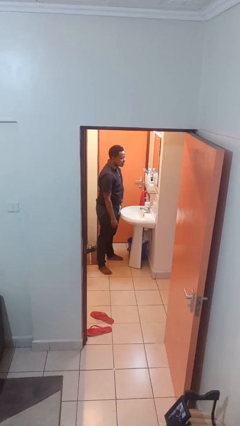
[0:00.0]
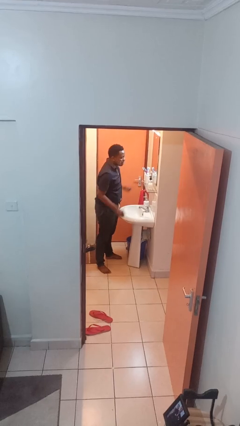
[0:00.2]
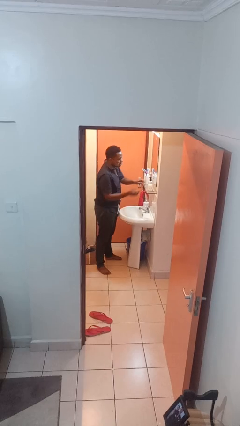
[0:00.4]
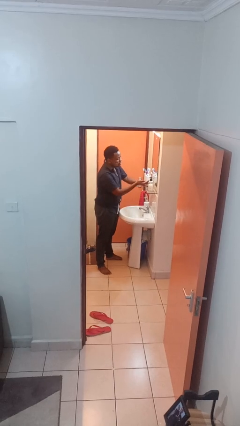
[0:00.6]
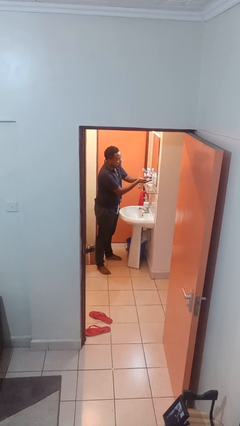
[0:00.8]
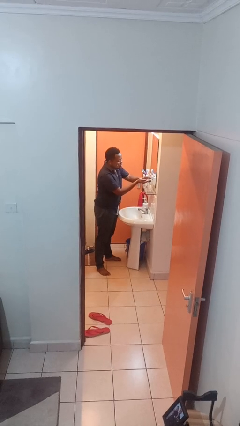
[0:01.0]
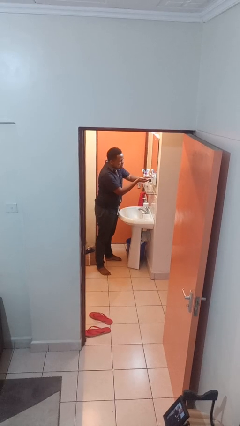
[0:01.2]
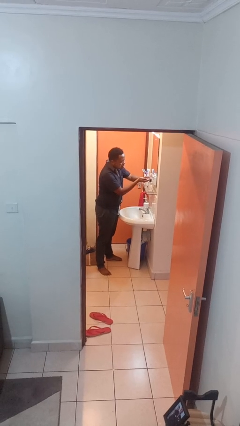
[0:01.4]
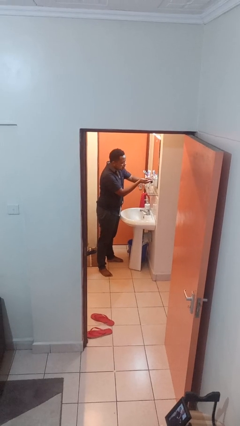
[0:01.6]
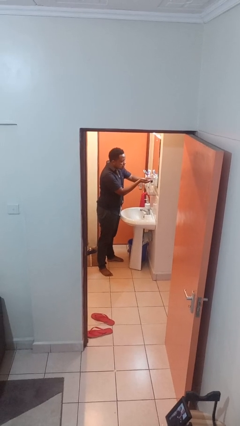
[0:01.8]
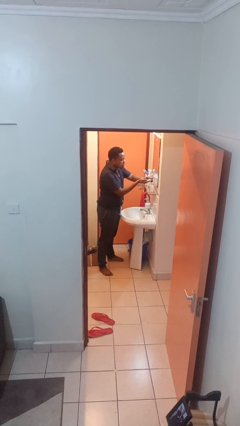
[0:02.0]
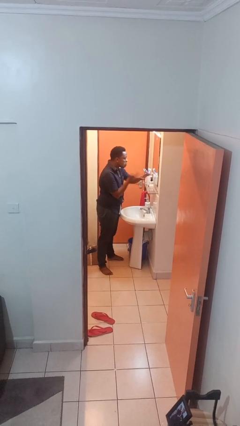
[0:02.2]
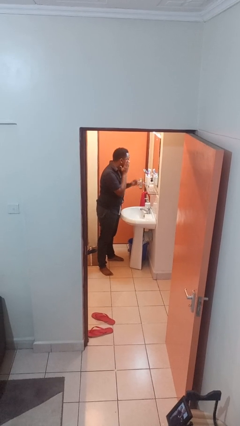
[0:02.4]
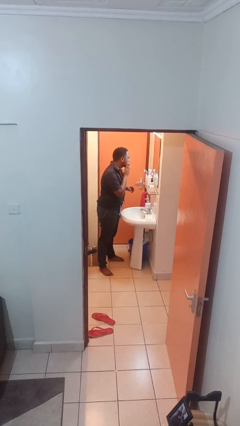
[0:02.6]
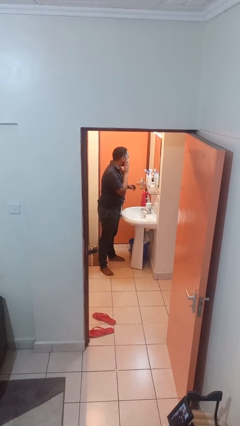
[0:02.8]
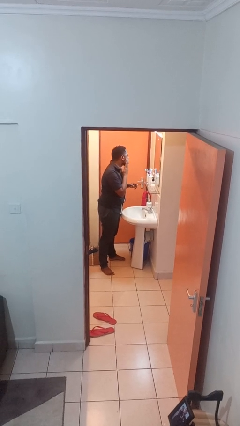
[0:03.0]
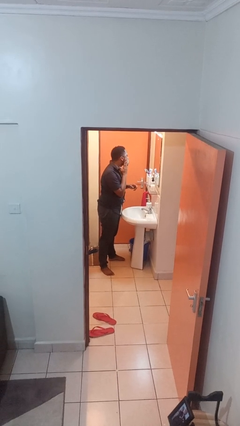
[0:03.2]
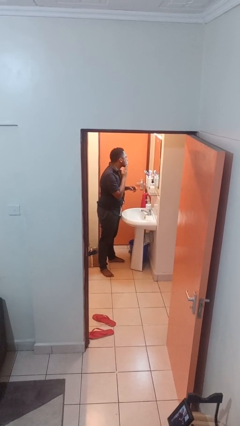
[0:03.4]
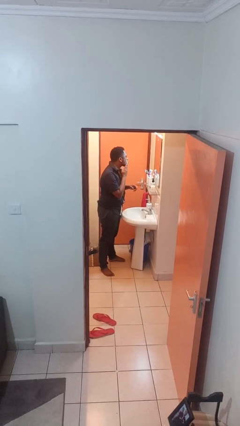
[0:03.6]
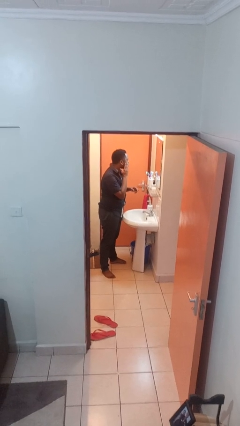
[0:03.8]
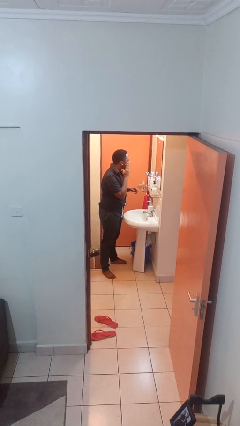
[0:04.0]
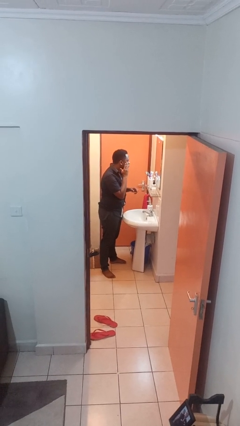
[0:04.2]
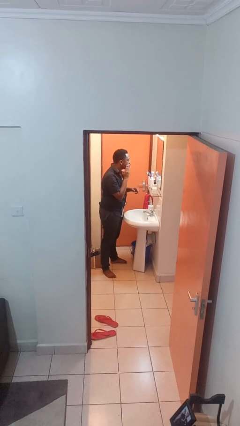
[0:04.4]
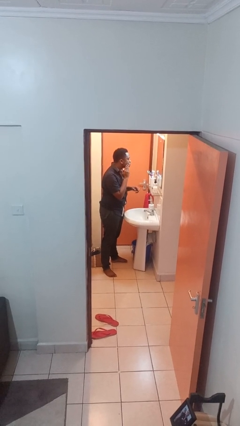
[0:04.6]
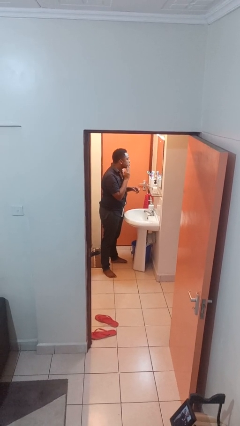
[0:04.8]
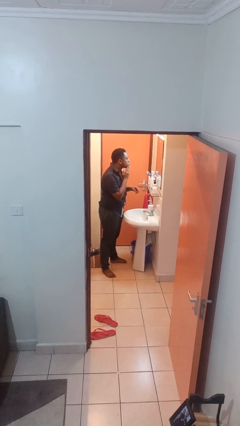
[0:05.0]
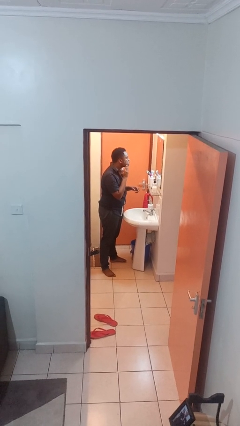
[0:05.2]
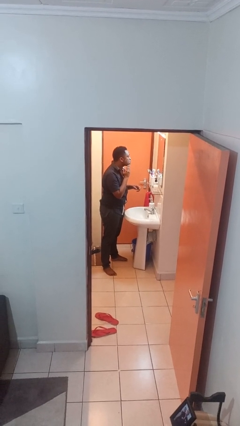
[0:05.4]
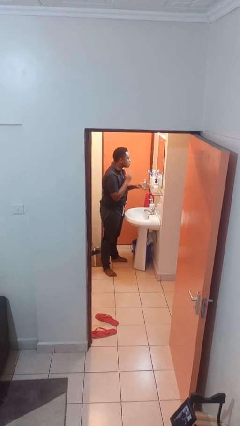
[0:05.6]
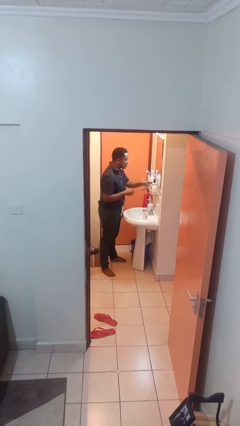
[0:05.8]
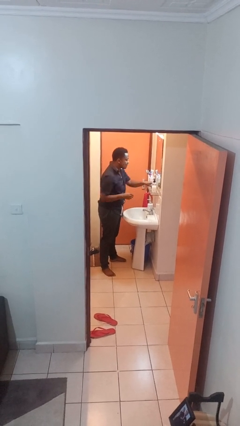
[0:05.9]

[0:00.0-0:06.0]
person applies shaving cream

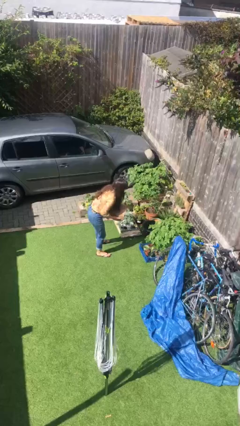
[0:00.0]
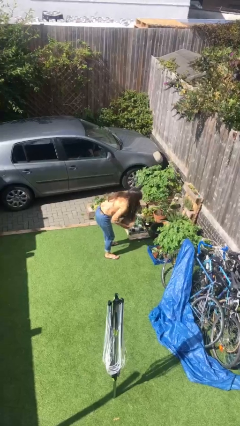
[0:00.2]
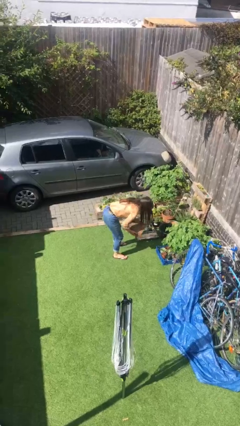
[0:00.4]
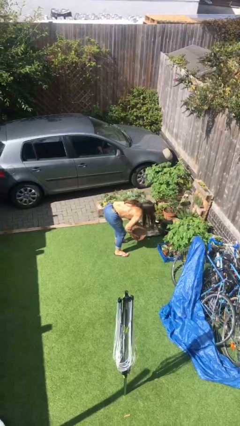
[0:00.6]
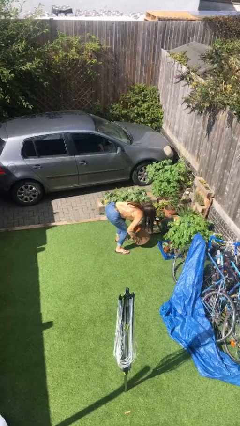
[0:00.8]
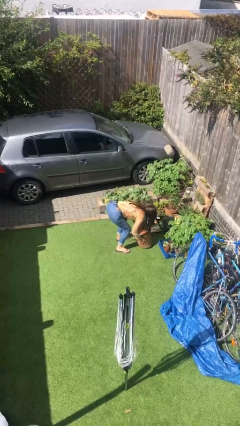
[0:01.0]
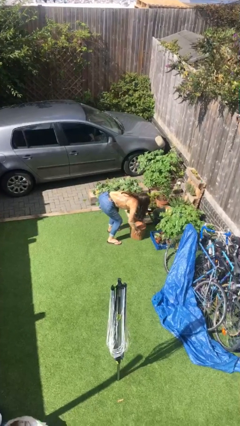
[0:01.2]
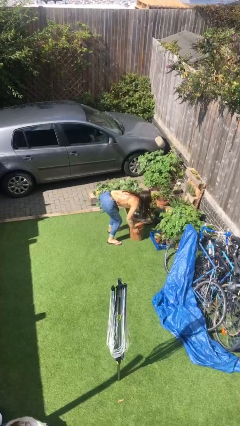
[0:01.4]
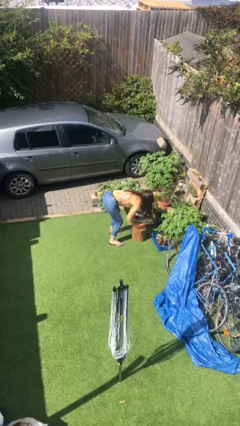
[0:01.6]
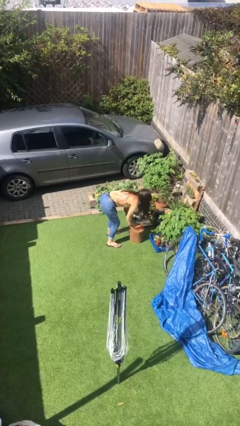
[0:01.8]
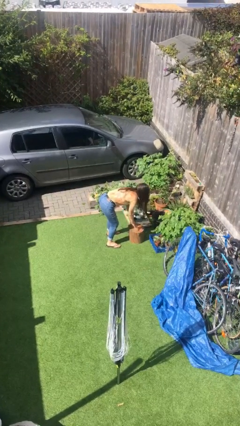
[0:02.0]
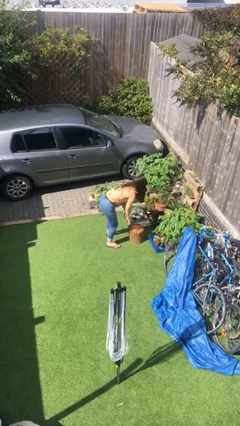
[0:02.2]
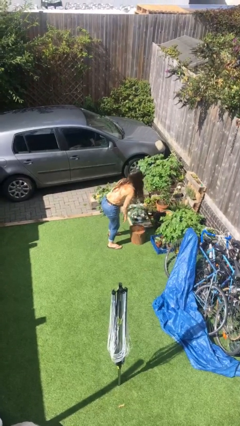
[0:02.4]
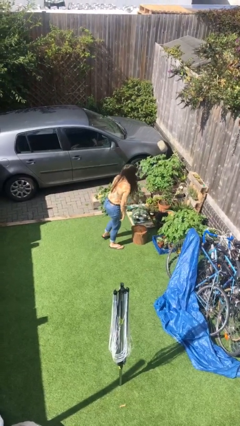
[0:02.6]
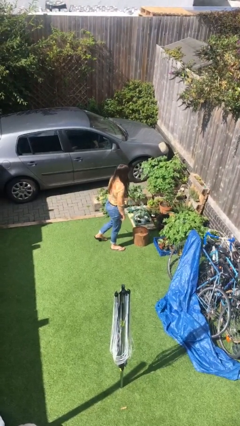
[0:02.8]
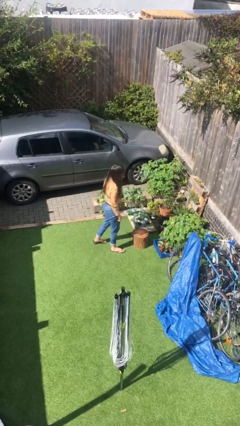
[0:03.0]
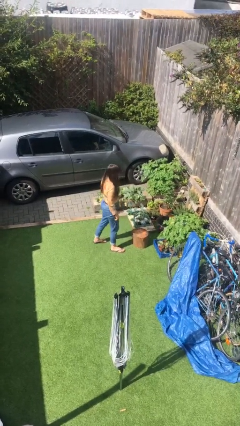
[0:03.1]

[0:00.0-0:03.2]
person puts down object on floor

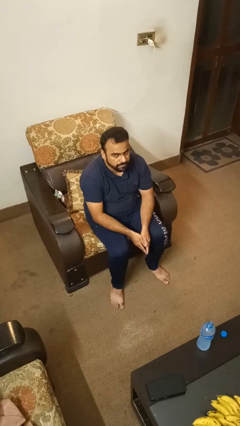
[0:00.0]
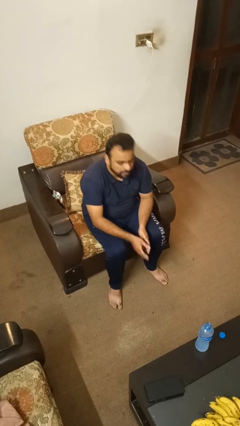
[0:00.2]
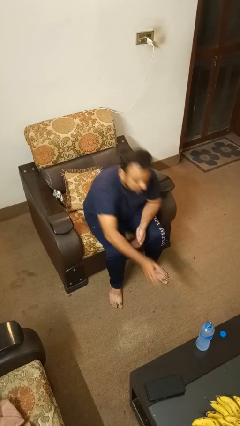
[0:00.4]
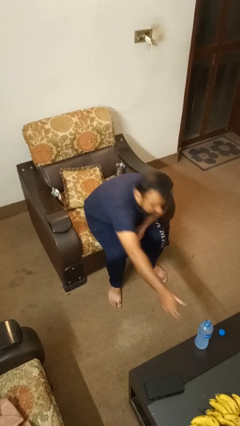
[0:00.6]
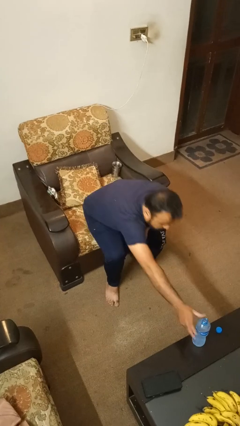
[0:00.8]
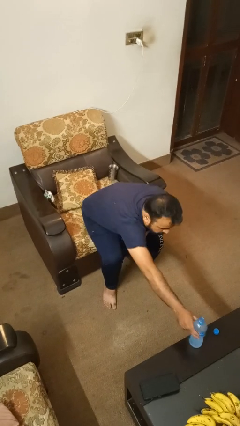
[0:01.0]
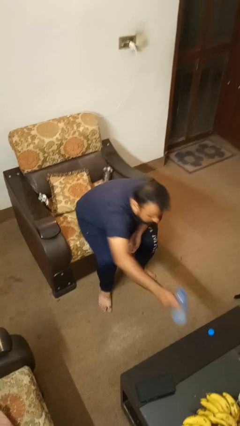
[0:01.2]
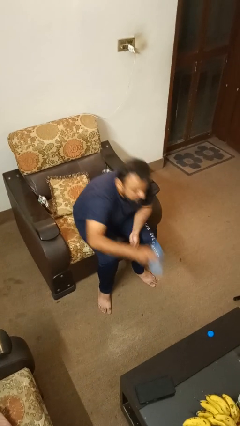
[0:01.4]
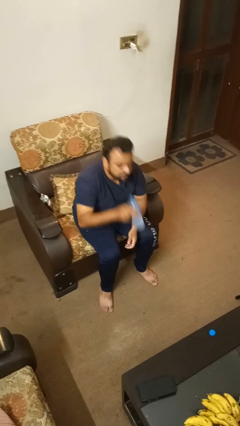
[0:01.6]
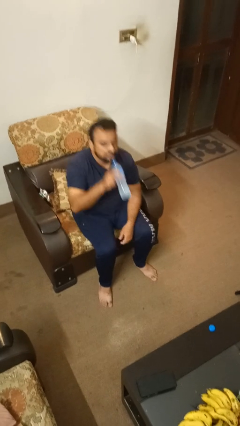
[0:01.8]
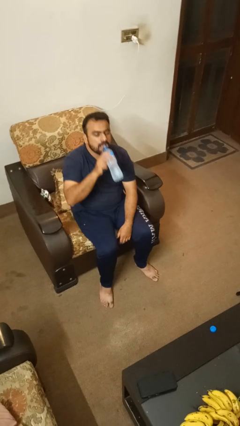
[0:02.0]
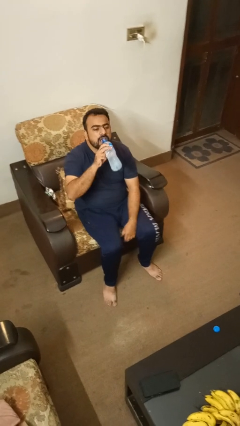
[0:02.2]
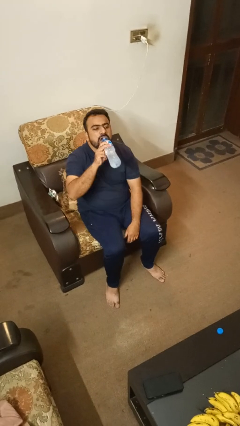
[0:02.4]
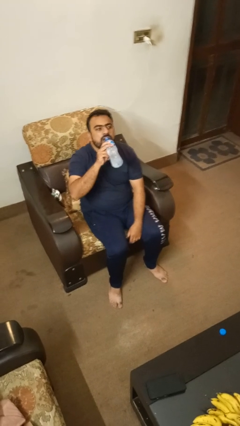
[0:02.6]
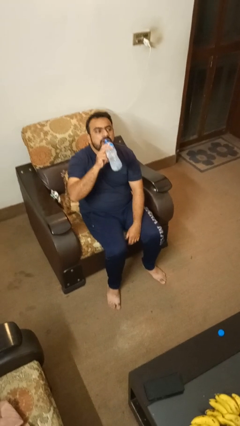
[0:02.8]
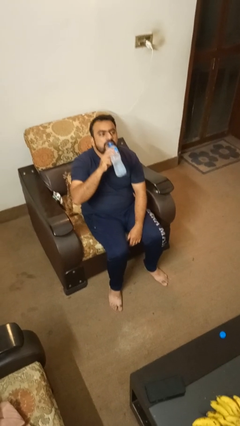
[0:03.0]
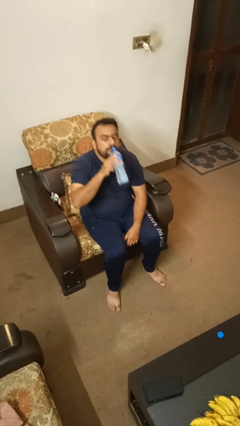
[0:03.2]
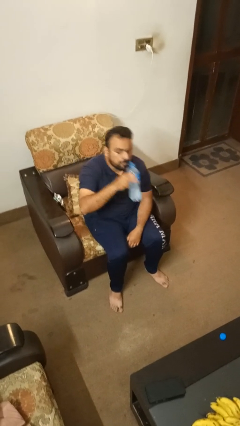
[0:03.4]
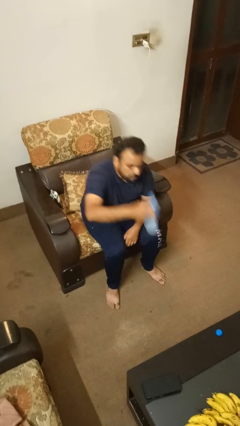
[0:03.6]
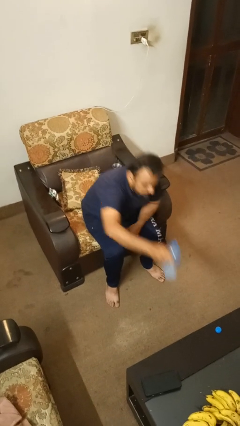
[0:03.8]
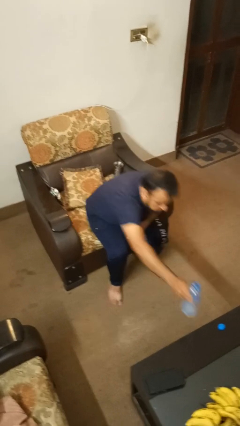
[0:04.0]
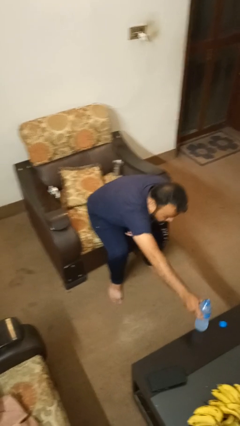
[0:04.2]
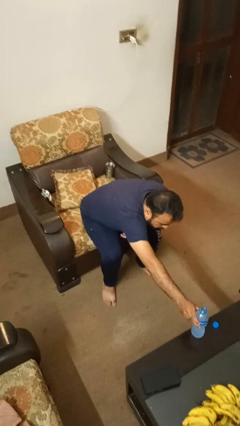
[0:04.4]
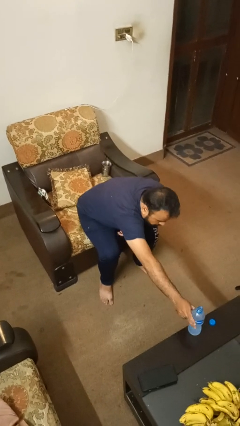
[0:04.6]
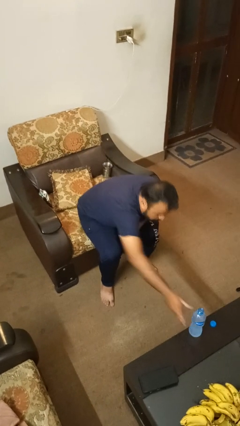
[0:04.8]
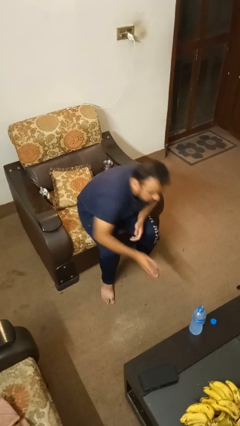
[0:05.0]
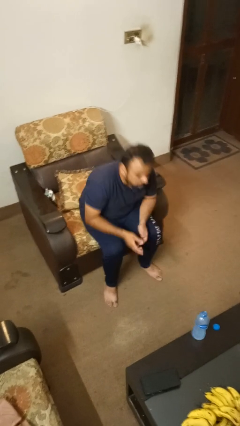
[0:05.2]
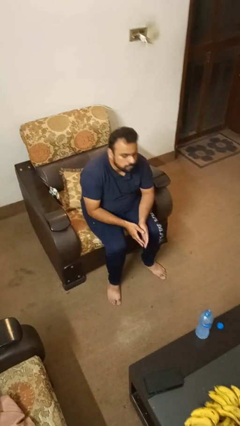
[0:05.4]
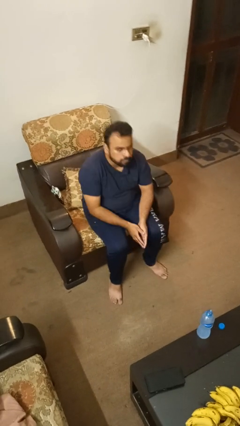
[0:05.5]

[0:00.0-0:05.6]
person drinks from bottle

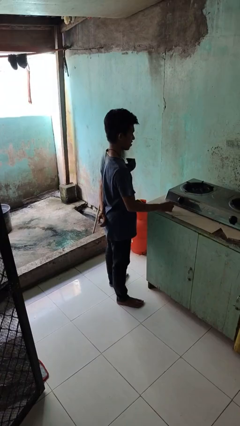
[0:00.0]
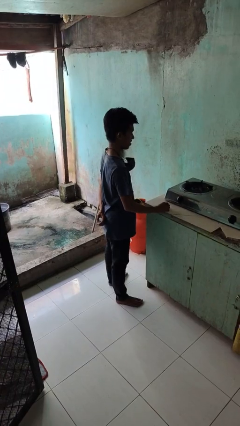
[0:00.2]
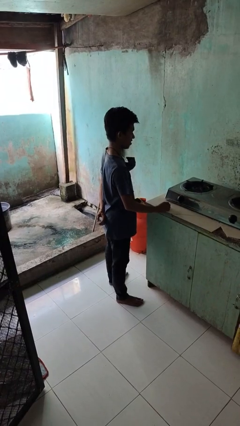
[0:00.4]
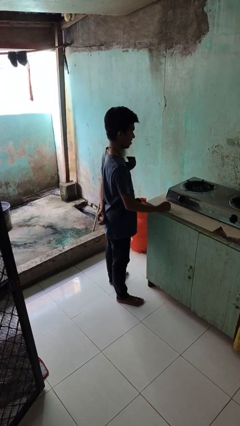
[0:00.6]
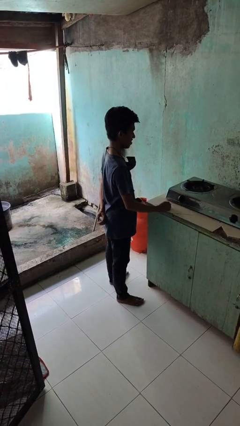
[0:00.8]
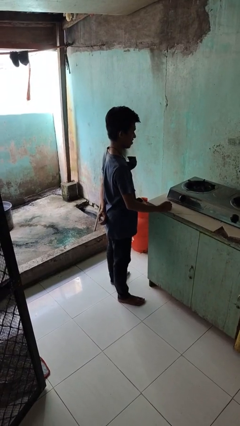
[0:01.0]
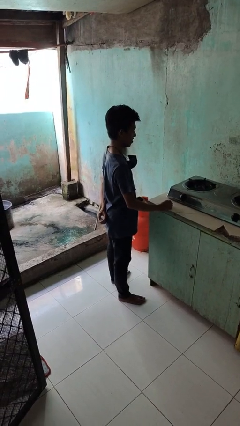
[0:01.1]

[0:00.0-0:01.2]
person turns off stovetop

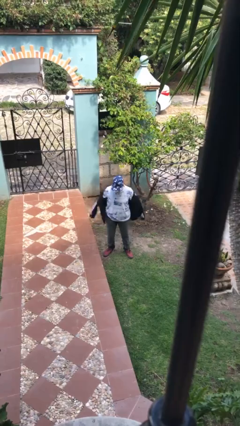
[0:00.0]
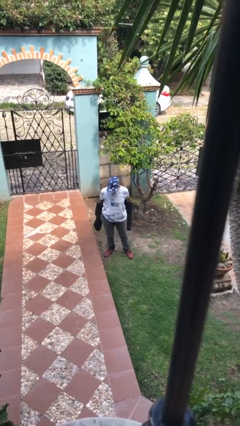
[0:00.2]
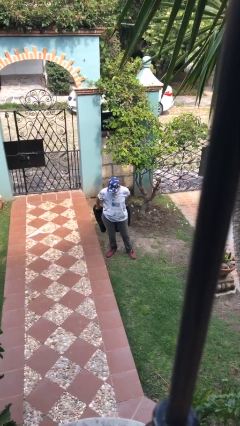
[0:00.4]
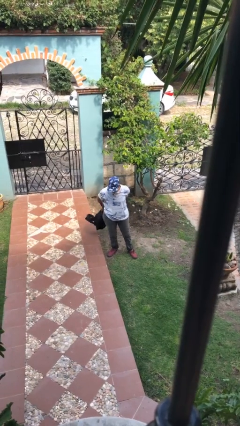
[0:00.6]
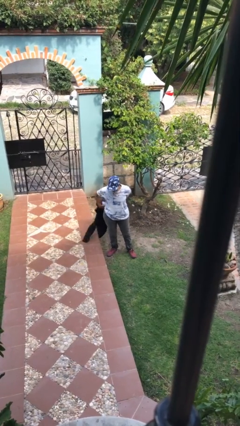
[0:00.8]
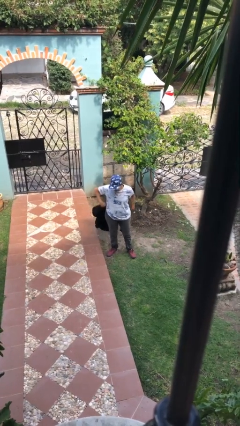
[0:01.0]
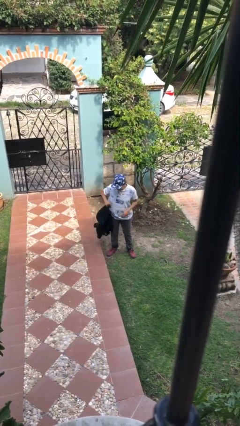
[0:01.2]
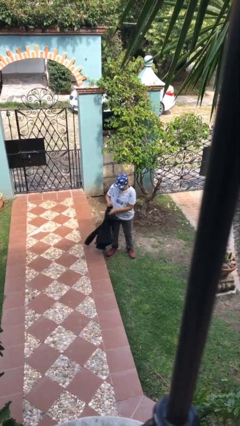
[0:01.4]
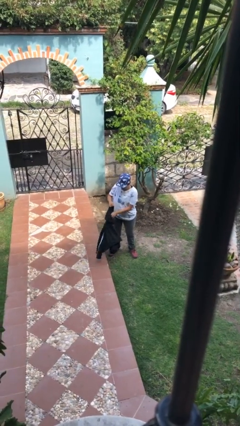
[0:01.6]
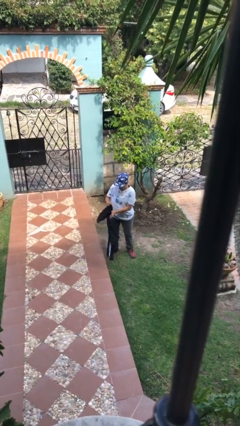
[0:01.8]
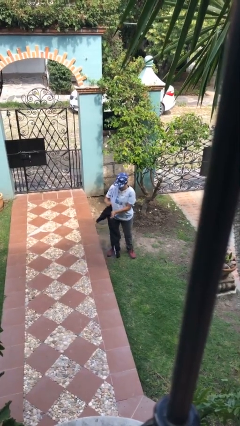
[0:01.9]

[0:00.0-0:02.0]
person takes off jacket
